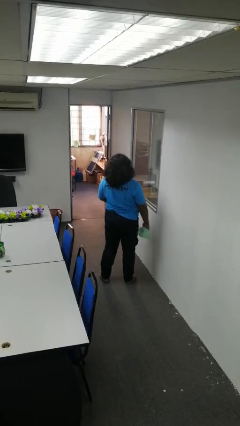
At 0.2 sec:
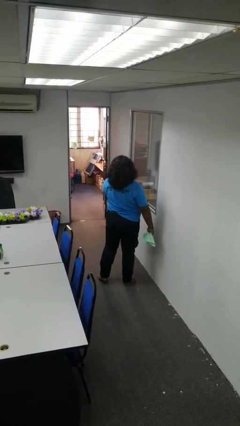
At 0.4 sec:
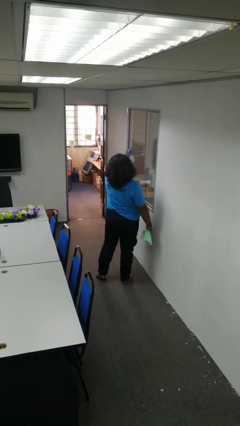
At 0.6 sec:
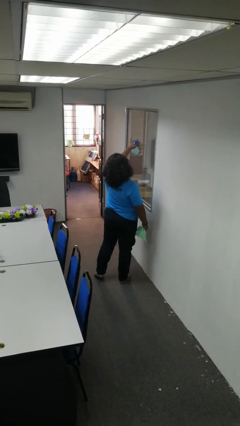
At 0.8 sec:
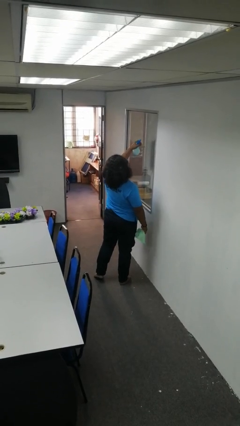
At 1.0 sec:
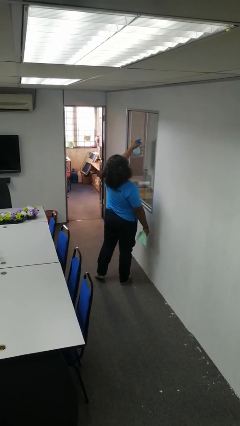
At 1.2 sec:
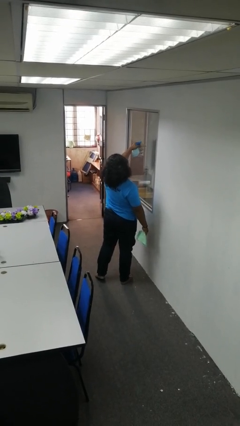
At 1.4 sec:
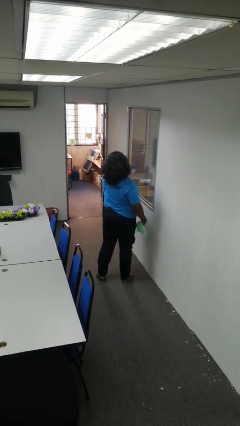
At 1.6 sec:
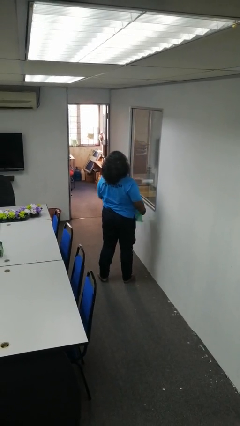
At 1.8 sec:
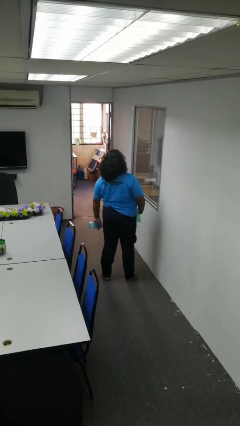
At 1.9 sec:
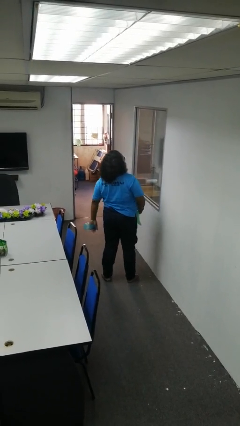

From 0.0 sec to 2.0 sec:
person sprays from bottle

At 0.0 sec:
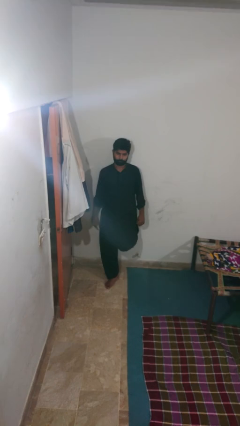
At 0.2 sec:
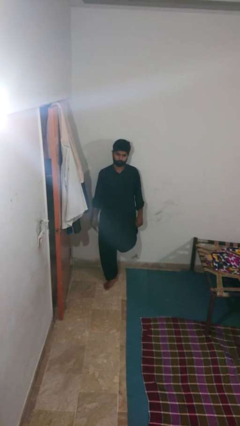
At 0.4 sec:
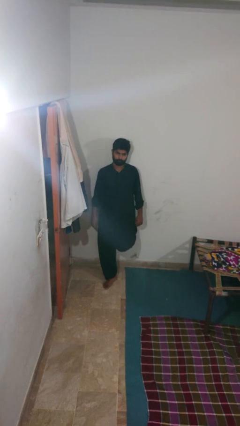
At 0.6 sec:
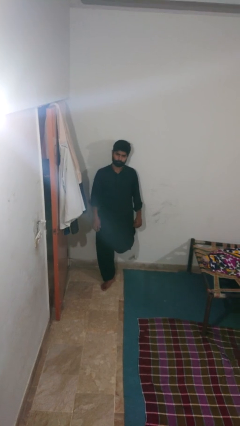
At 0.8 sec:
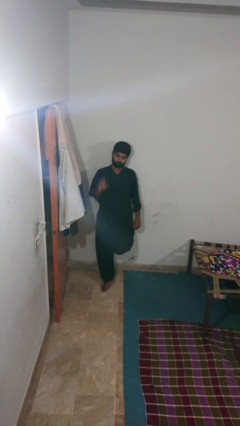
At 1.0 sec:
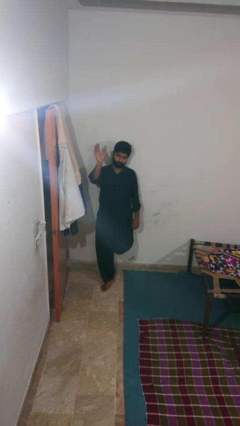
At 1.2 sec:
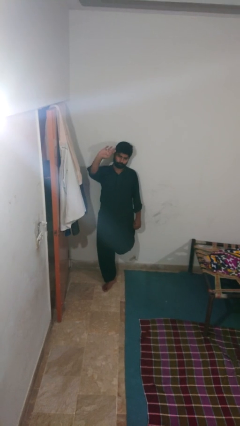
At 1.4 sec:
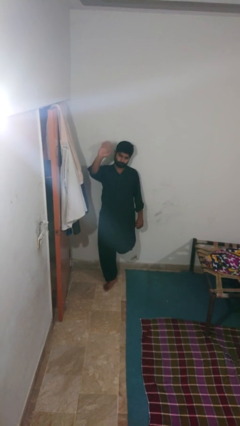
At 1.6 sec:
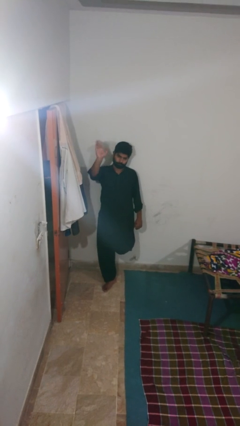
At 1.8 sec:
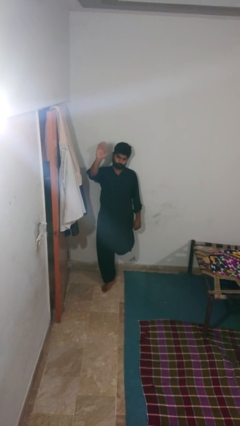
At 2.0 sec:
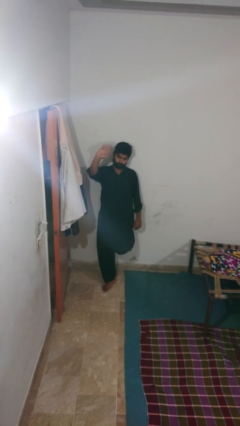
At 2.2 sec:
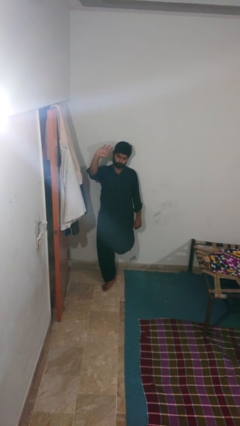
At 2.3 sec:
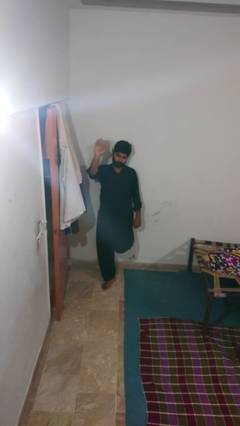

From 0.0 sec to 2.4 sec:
person waves at person

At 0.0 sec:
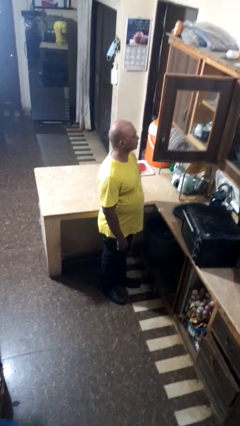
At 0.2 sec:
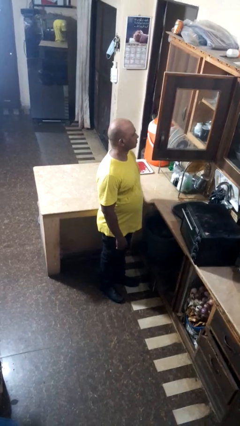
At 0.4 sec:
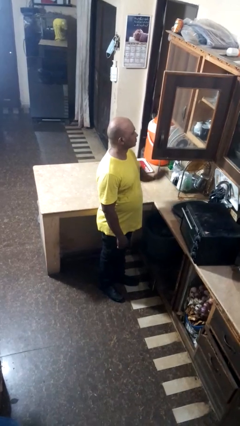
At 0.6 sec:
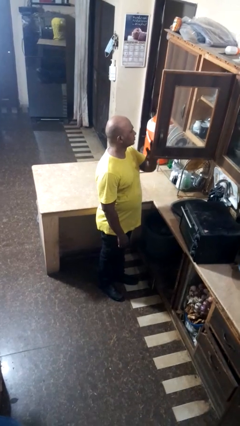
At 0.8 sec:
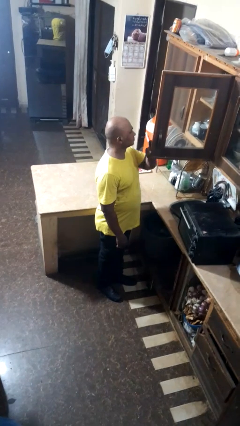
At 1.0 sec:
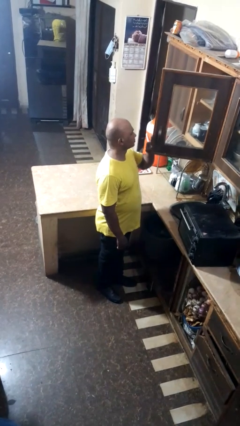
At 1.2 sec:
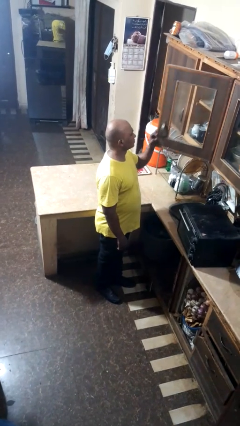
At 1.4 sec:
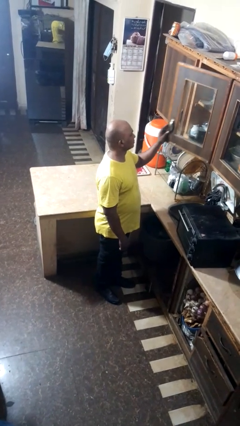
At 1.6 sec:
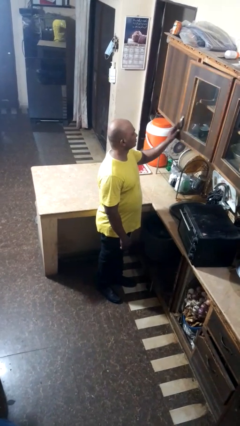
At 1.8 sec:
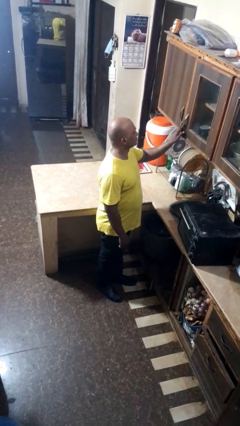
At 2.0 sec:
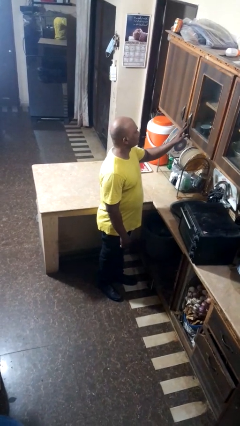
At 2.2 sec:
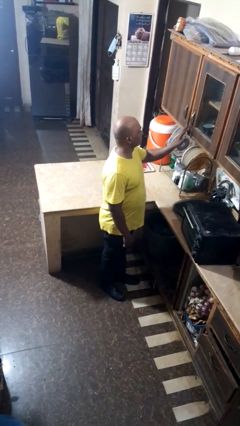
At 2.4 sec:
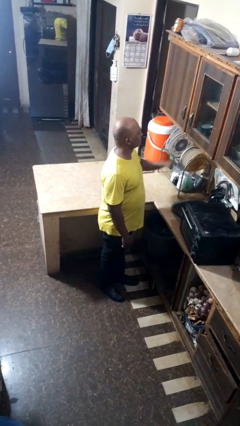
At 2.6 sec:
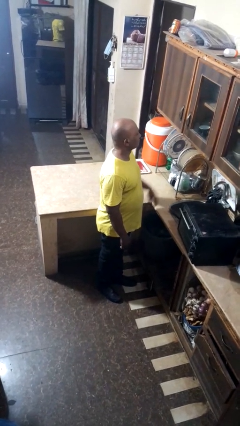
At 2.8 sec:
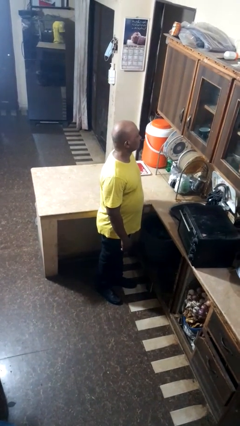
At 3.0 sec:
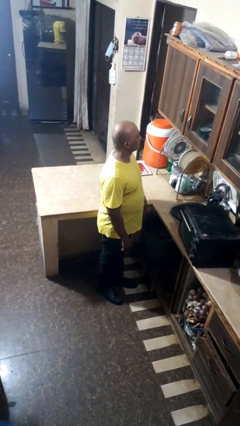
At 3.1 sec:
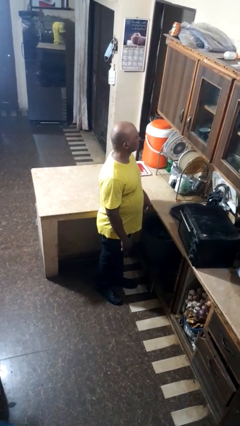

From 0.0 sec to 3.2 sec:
person closes cabinet

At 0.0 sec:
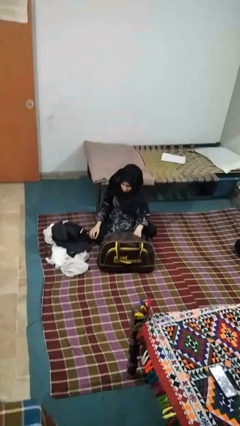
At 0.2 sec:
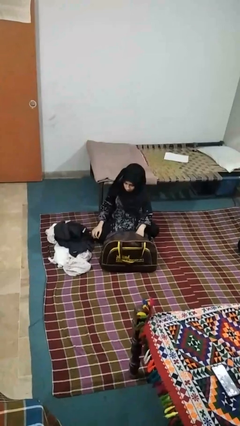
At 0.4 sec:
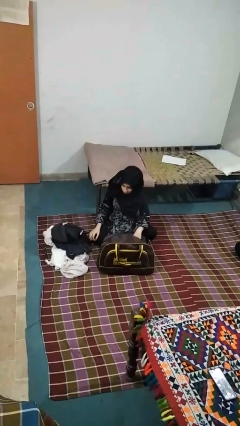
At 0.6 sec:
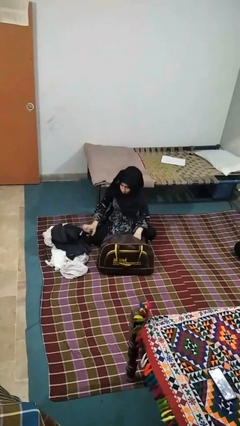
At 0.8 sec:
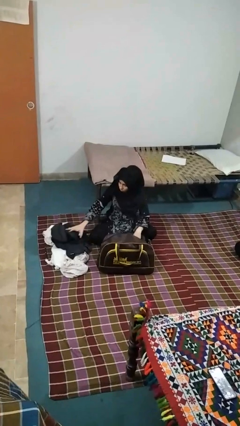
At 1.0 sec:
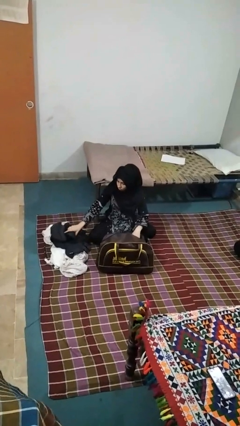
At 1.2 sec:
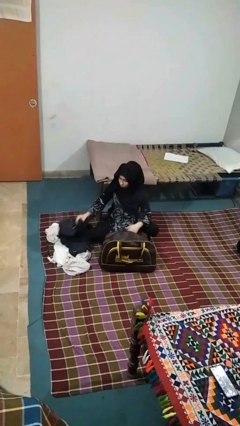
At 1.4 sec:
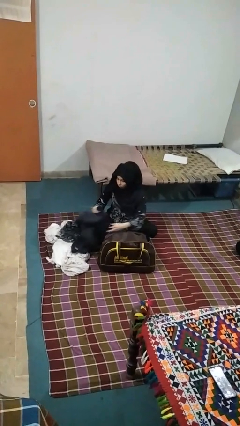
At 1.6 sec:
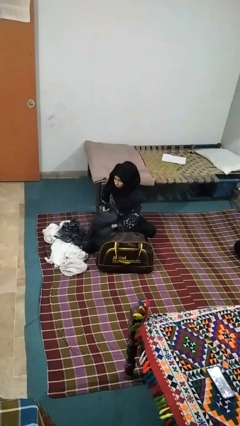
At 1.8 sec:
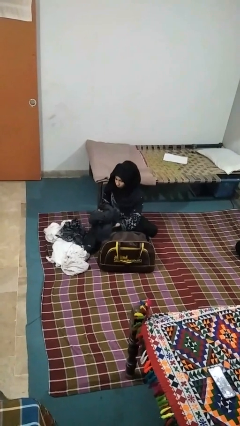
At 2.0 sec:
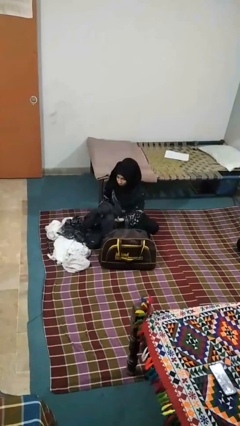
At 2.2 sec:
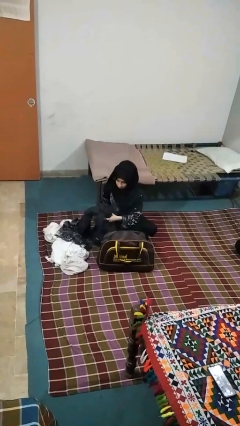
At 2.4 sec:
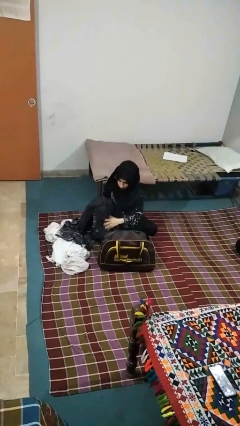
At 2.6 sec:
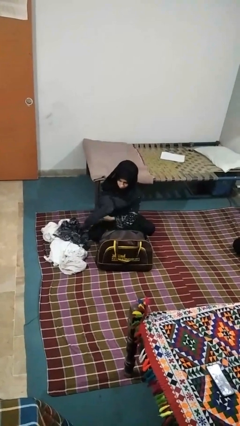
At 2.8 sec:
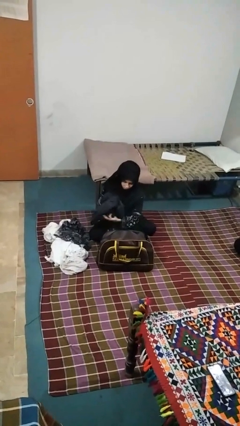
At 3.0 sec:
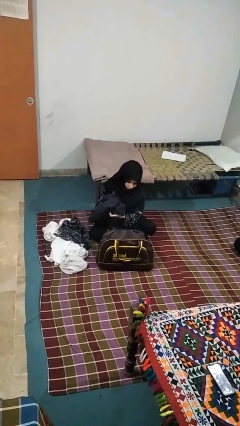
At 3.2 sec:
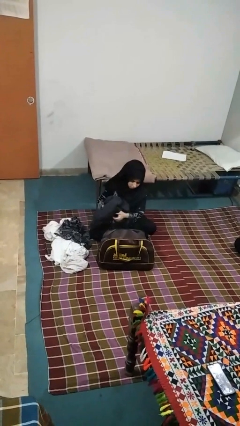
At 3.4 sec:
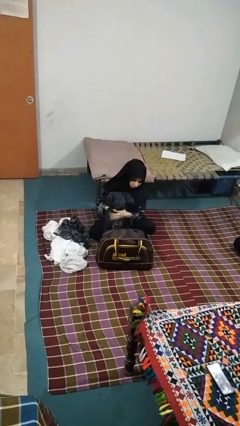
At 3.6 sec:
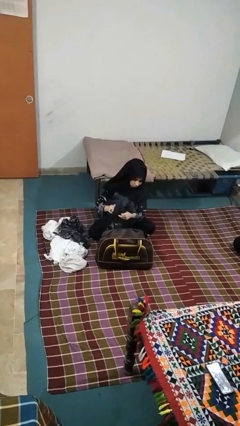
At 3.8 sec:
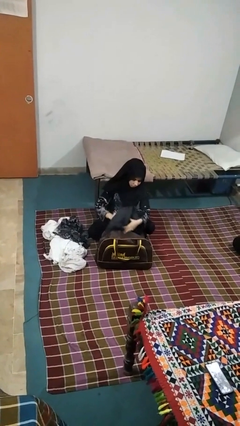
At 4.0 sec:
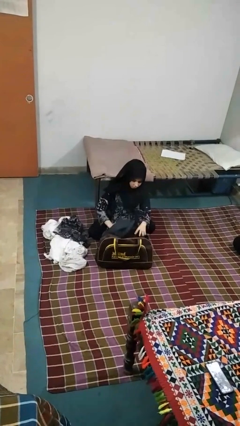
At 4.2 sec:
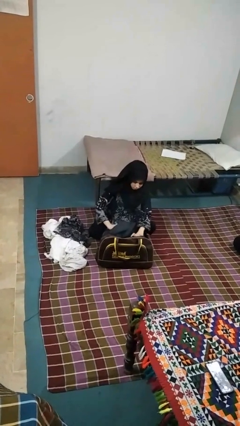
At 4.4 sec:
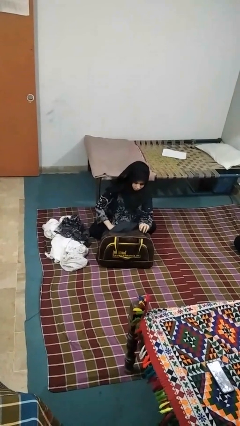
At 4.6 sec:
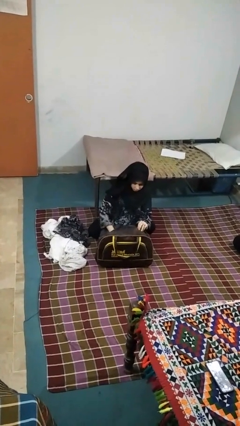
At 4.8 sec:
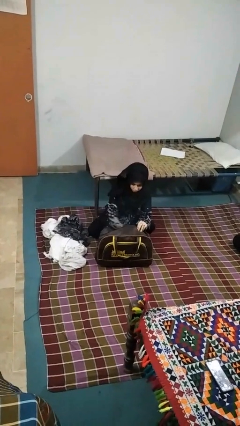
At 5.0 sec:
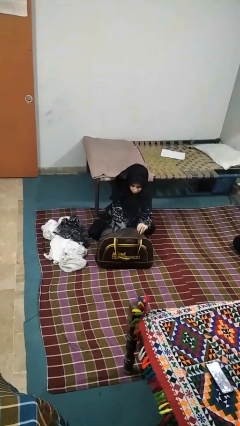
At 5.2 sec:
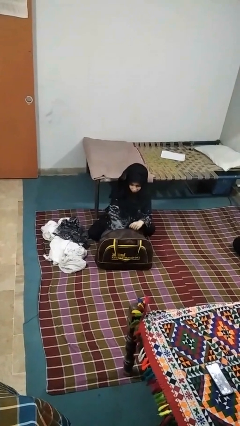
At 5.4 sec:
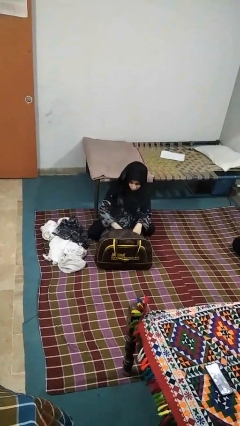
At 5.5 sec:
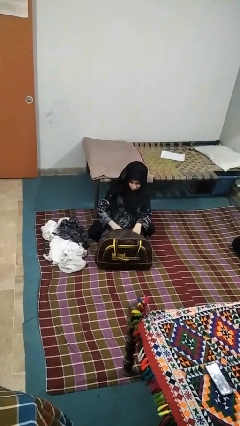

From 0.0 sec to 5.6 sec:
person loads clothes into suitcase

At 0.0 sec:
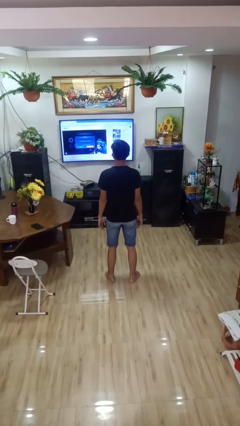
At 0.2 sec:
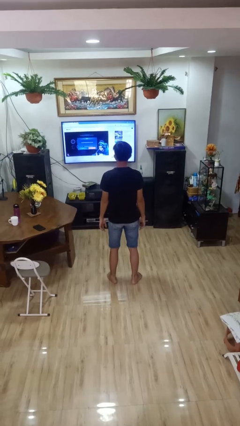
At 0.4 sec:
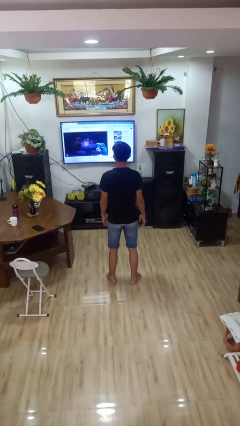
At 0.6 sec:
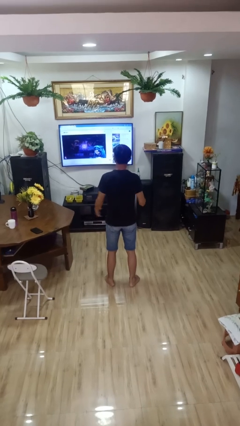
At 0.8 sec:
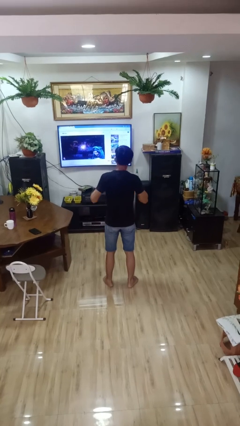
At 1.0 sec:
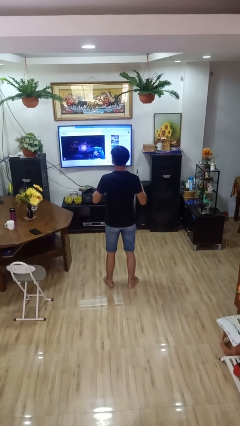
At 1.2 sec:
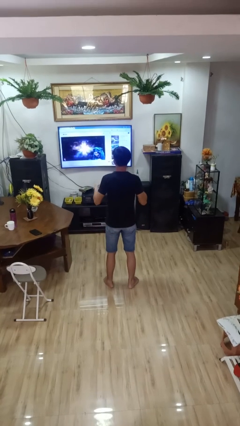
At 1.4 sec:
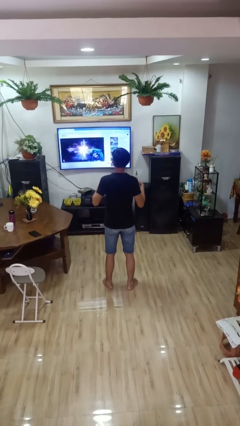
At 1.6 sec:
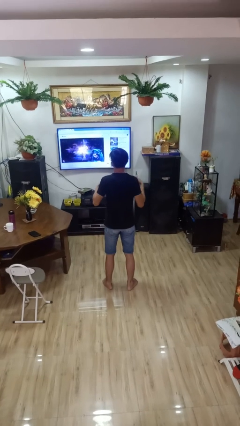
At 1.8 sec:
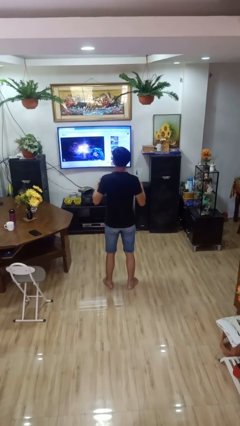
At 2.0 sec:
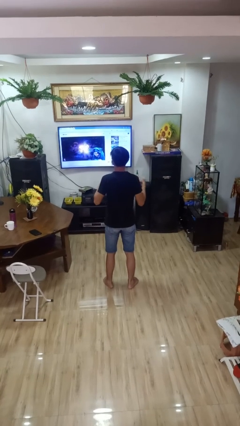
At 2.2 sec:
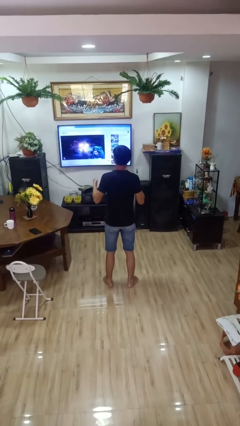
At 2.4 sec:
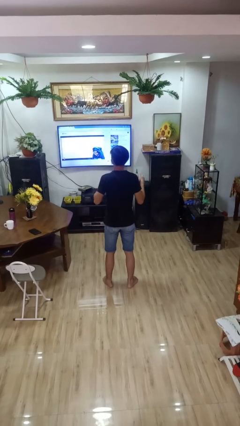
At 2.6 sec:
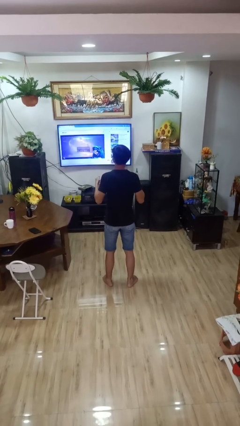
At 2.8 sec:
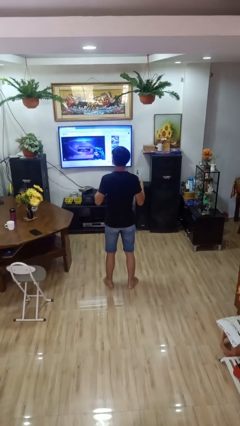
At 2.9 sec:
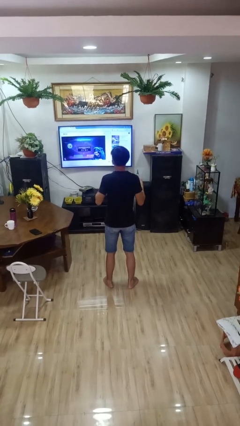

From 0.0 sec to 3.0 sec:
person drums on chest

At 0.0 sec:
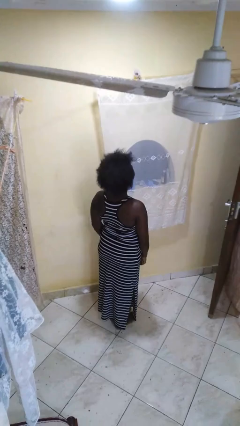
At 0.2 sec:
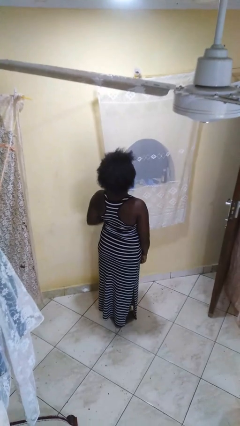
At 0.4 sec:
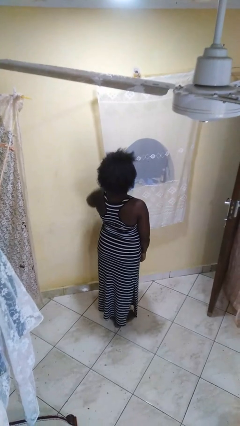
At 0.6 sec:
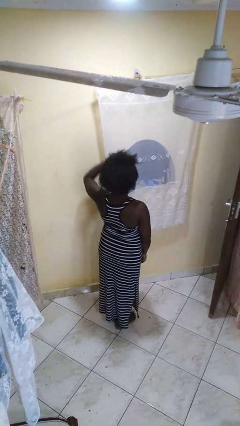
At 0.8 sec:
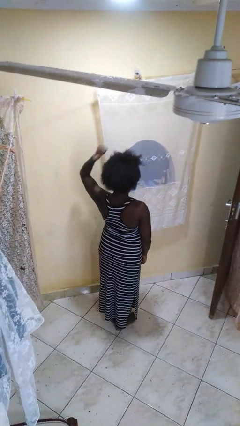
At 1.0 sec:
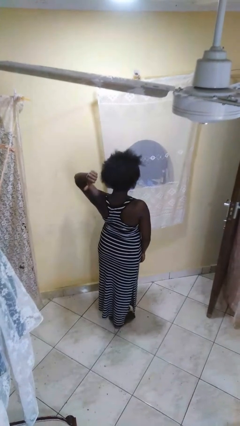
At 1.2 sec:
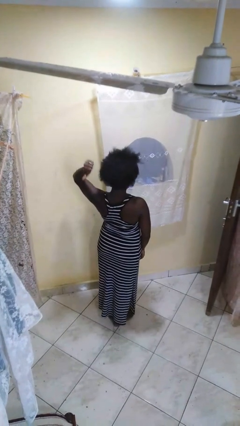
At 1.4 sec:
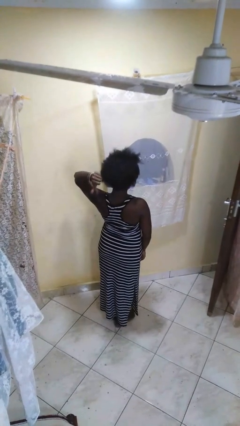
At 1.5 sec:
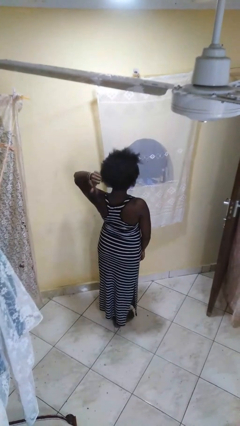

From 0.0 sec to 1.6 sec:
person gestures behind me
